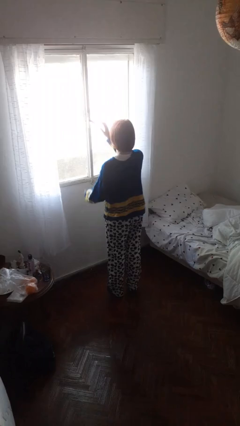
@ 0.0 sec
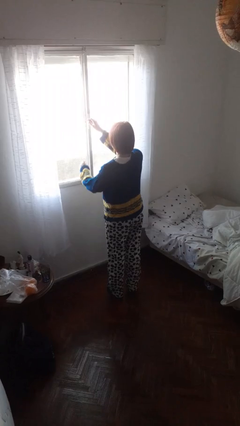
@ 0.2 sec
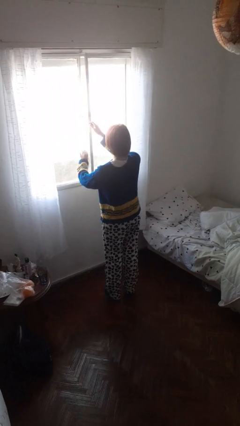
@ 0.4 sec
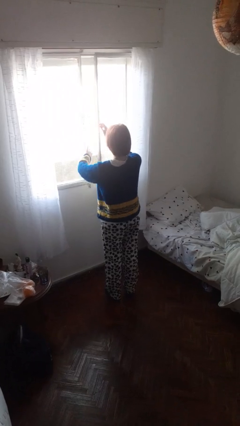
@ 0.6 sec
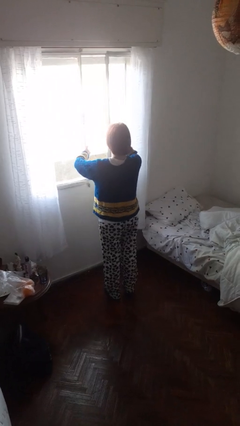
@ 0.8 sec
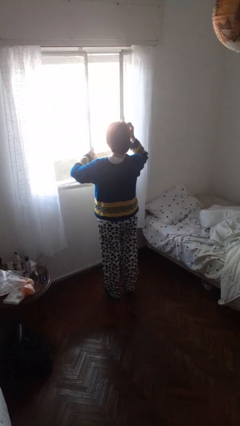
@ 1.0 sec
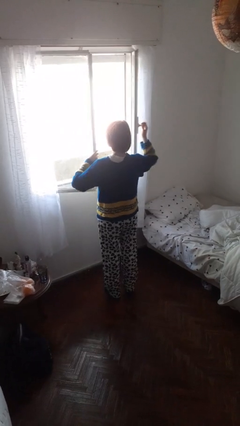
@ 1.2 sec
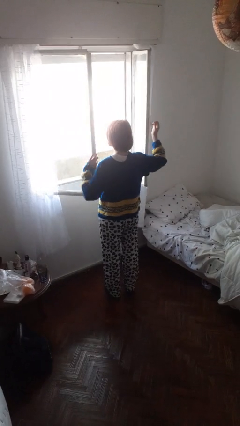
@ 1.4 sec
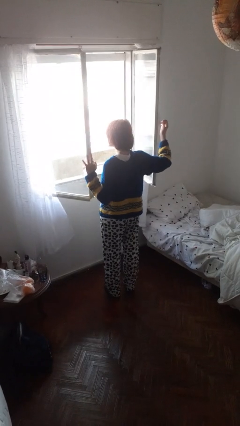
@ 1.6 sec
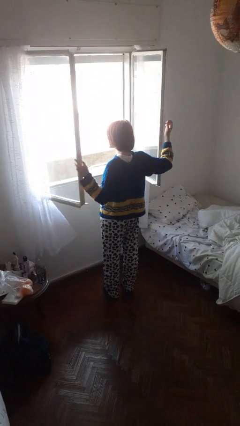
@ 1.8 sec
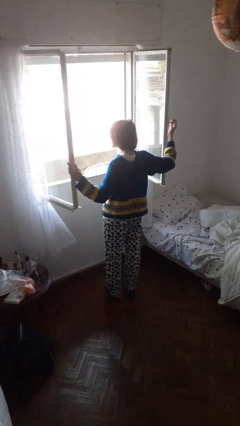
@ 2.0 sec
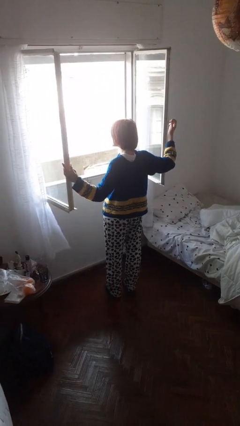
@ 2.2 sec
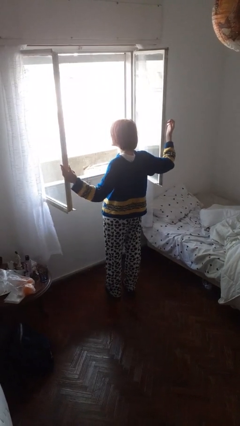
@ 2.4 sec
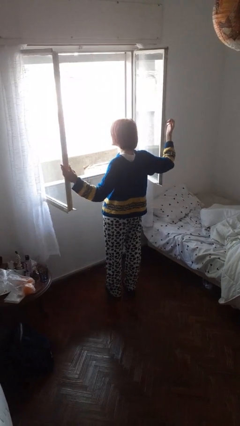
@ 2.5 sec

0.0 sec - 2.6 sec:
person opens home window

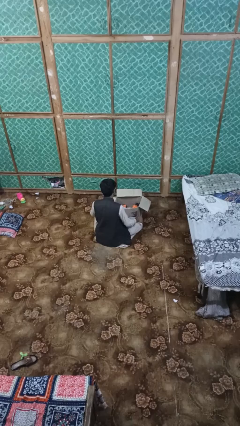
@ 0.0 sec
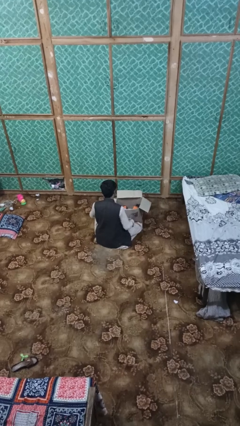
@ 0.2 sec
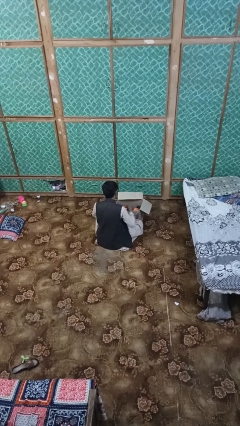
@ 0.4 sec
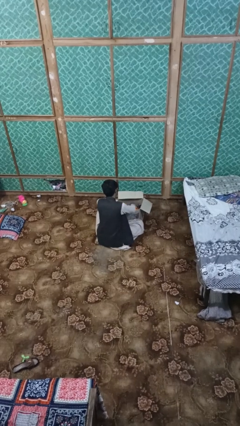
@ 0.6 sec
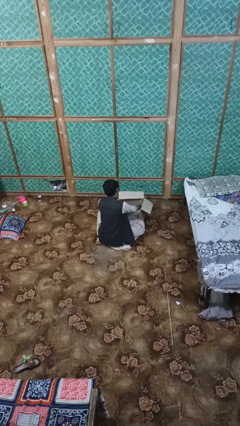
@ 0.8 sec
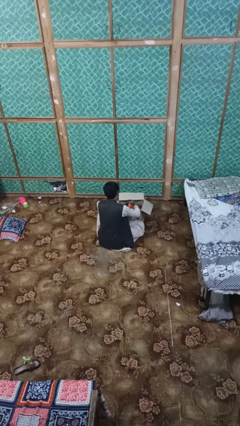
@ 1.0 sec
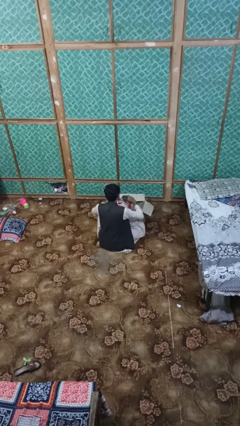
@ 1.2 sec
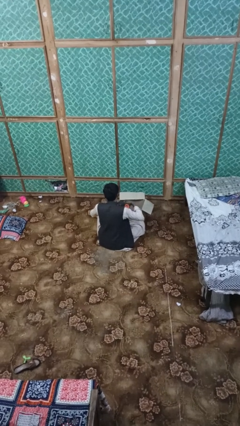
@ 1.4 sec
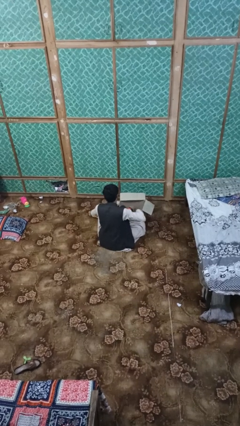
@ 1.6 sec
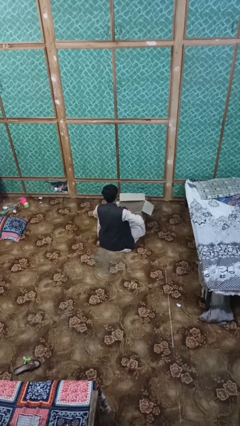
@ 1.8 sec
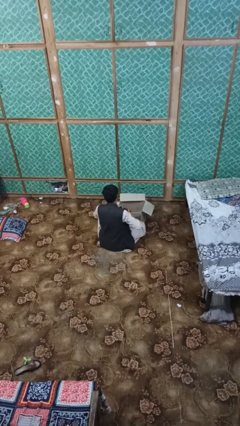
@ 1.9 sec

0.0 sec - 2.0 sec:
person takes object from box

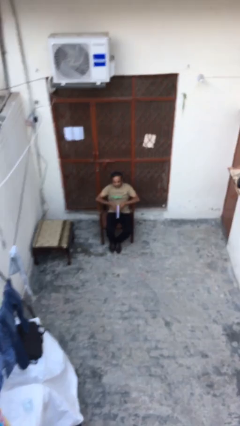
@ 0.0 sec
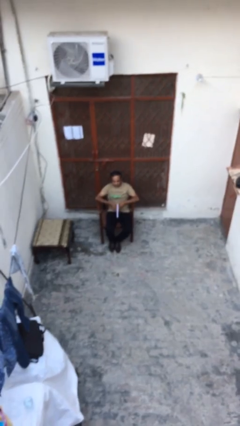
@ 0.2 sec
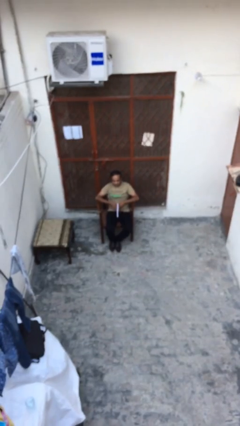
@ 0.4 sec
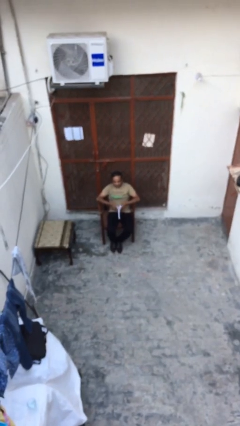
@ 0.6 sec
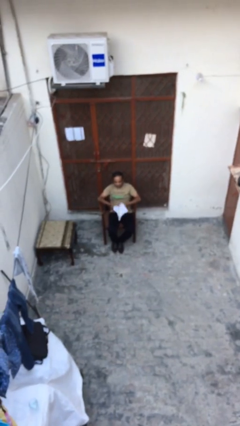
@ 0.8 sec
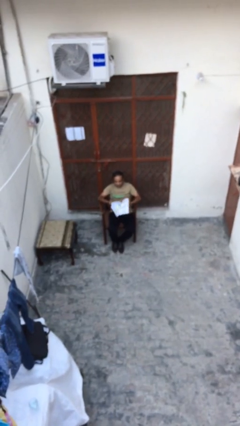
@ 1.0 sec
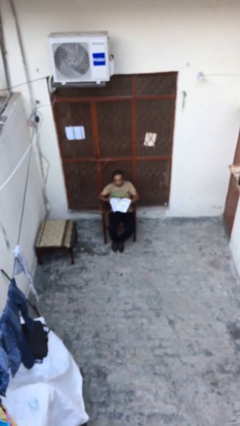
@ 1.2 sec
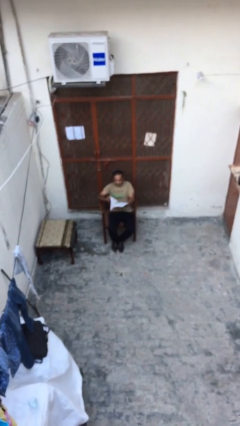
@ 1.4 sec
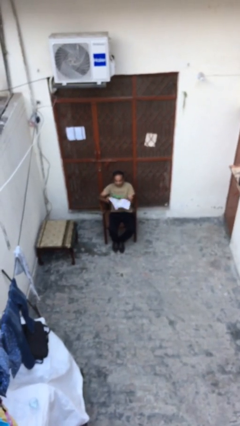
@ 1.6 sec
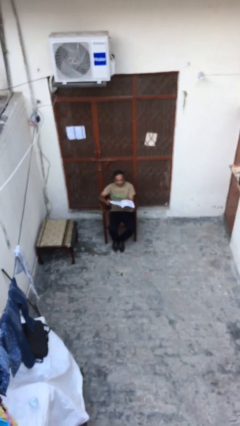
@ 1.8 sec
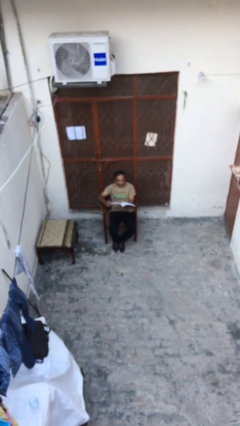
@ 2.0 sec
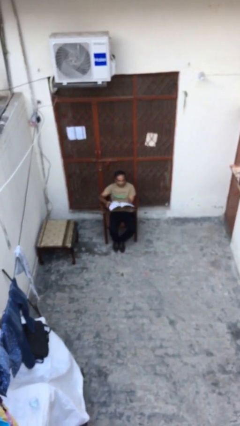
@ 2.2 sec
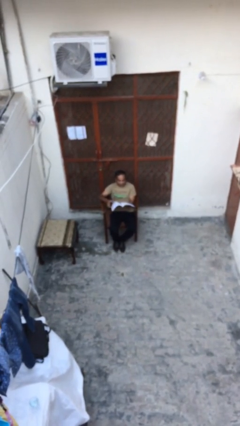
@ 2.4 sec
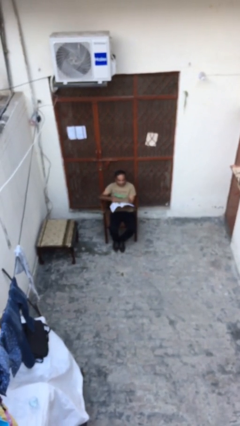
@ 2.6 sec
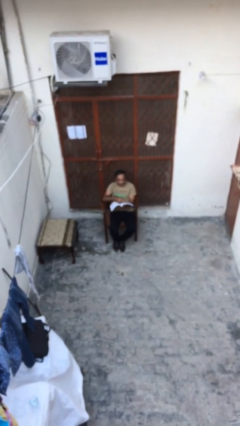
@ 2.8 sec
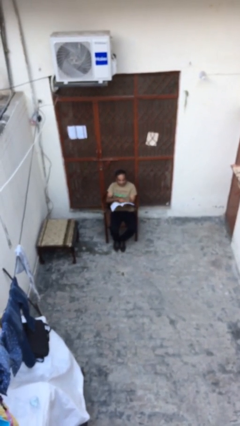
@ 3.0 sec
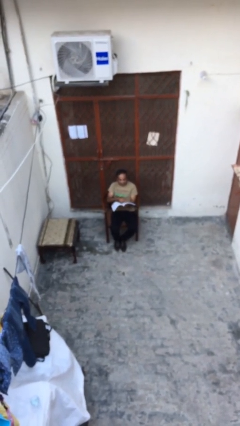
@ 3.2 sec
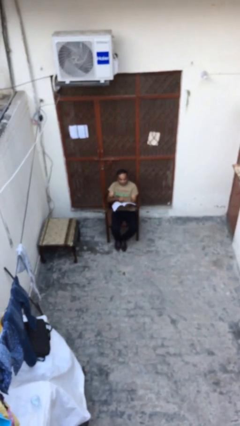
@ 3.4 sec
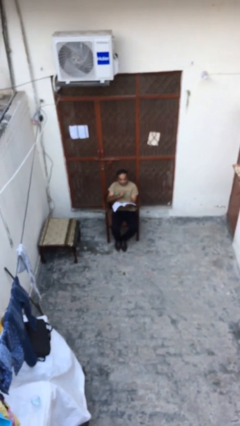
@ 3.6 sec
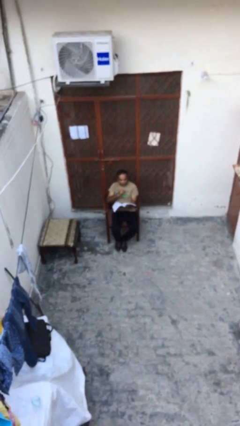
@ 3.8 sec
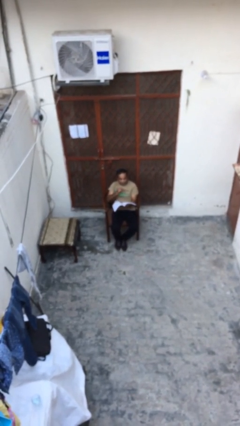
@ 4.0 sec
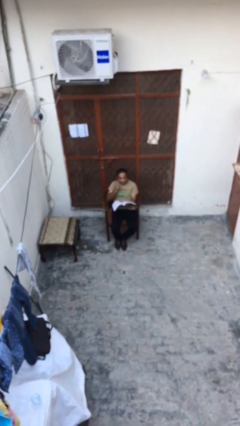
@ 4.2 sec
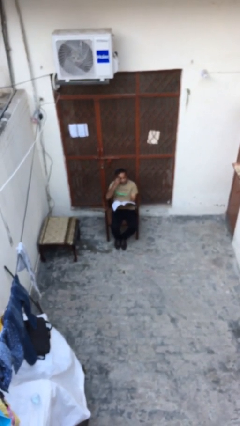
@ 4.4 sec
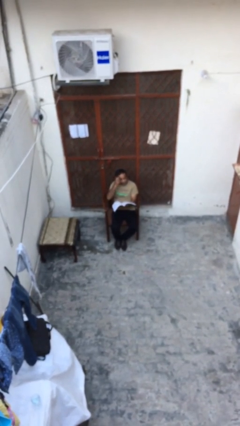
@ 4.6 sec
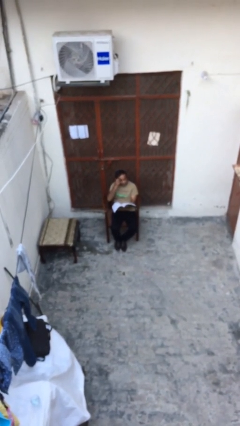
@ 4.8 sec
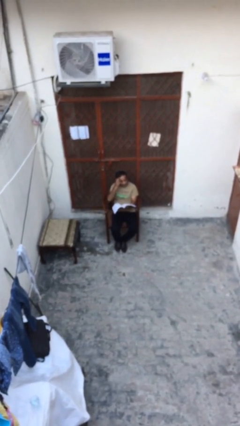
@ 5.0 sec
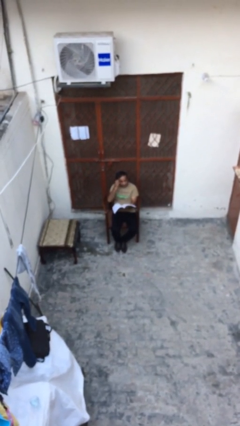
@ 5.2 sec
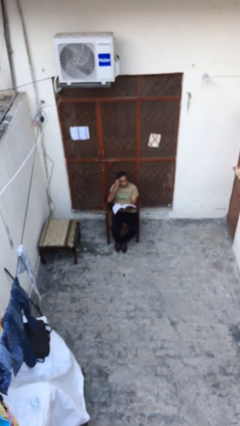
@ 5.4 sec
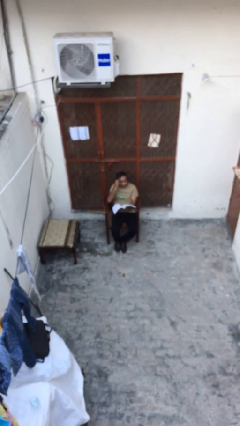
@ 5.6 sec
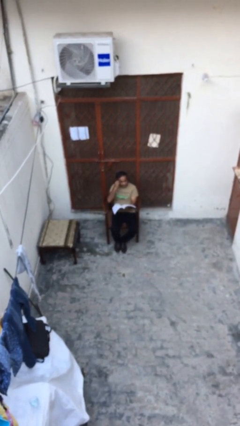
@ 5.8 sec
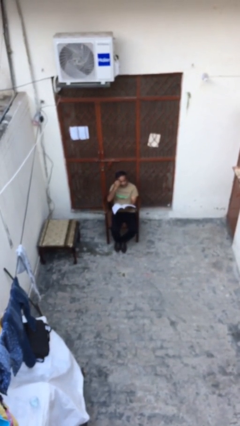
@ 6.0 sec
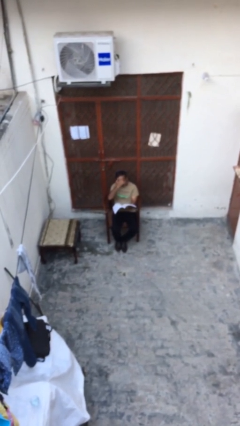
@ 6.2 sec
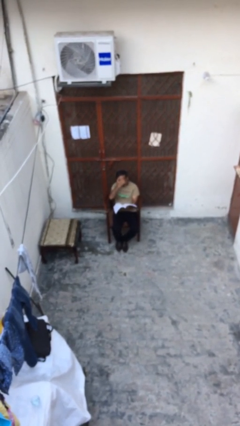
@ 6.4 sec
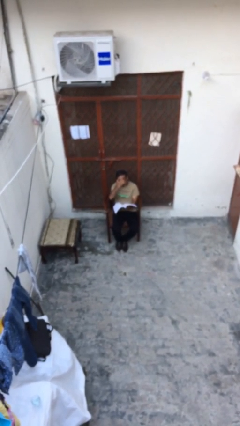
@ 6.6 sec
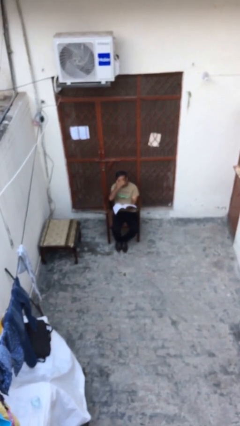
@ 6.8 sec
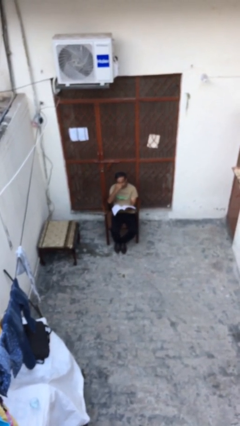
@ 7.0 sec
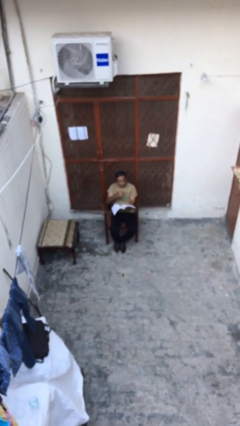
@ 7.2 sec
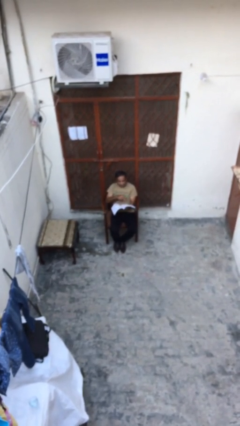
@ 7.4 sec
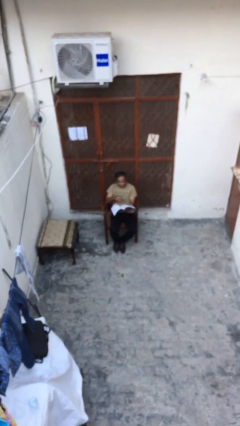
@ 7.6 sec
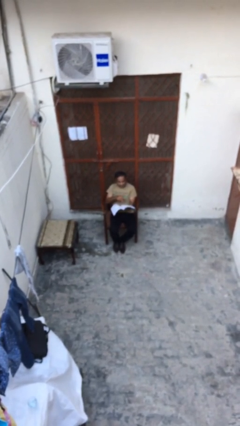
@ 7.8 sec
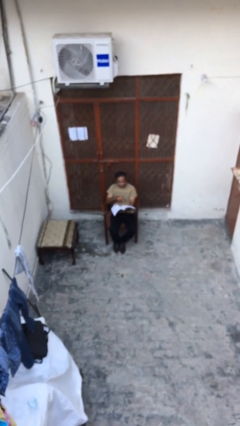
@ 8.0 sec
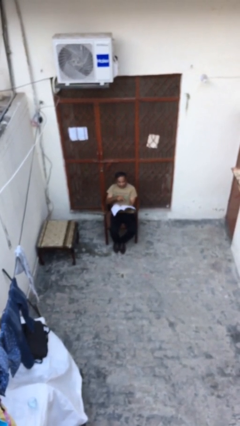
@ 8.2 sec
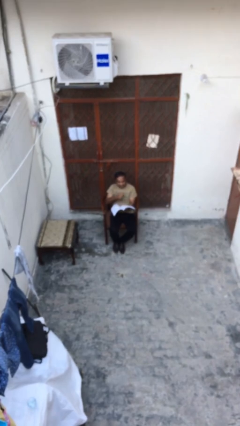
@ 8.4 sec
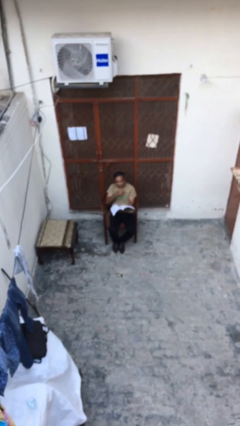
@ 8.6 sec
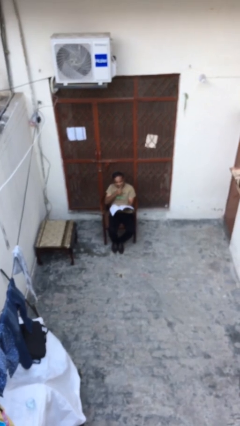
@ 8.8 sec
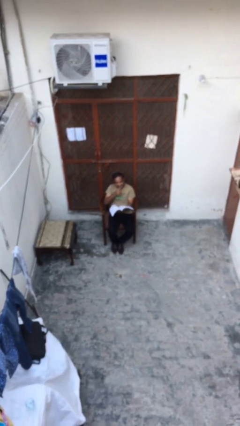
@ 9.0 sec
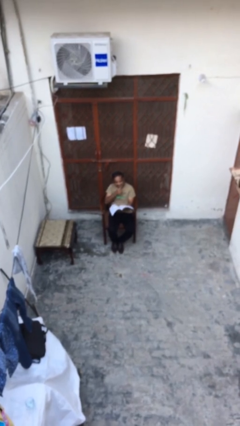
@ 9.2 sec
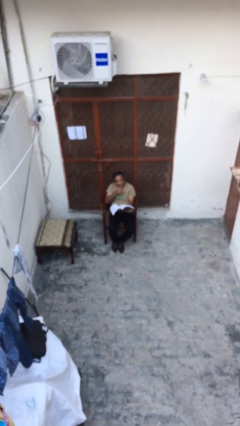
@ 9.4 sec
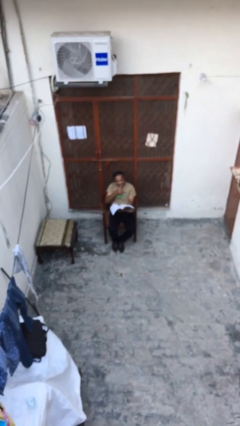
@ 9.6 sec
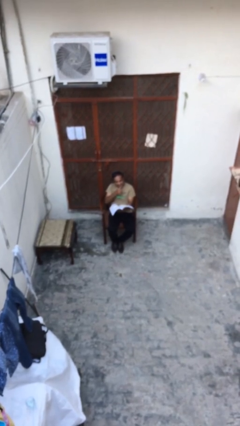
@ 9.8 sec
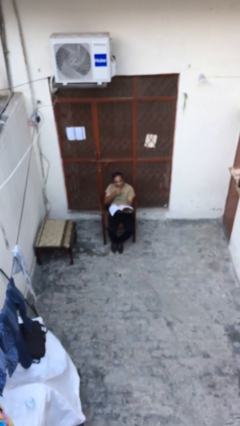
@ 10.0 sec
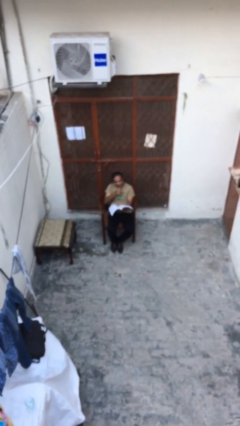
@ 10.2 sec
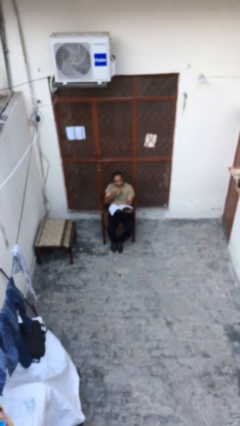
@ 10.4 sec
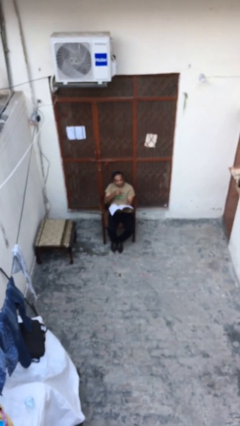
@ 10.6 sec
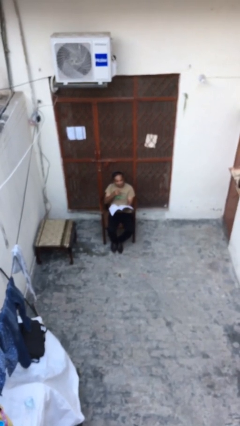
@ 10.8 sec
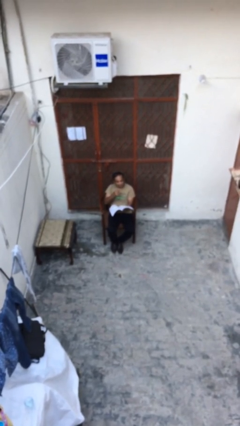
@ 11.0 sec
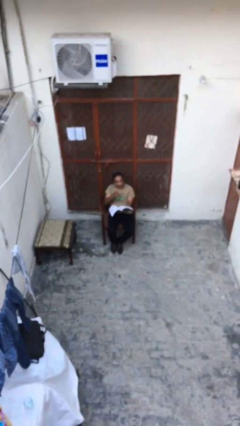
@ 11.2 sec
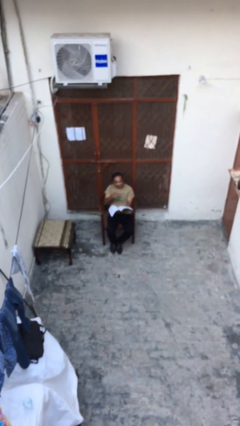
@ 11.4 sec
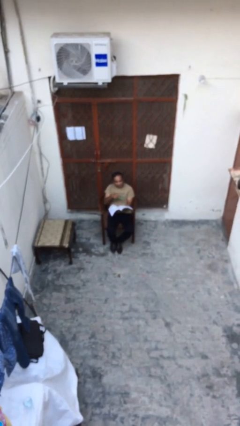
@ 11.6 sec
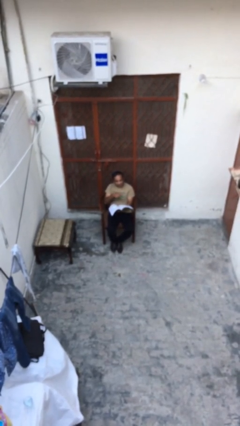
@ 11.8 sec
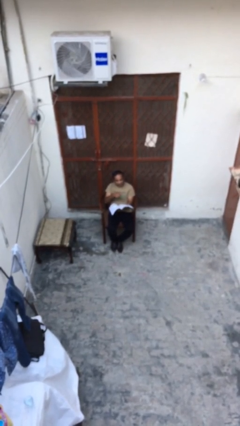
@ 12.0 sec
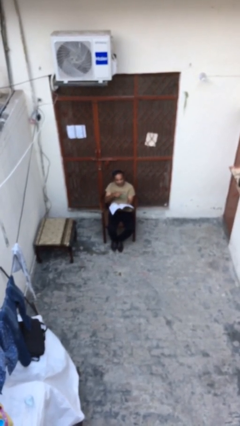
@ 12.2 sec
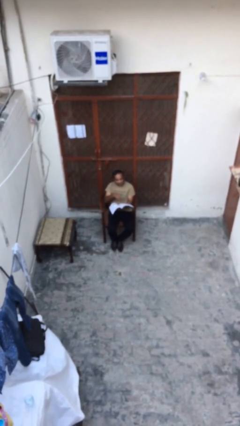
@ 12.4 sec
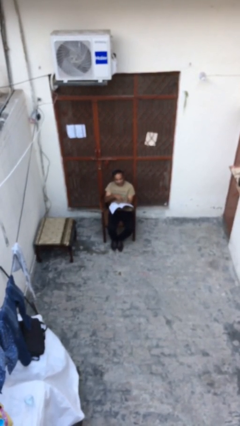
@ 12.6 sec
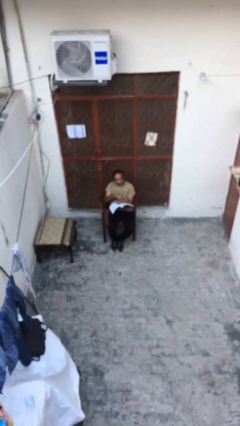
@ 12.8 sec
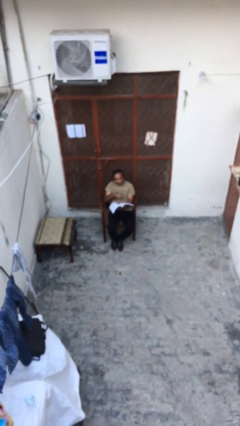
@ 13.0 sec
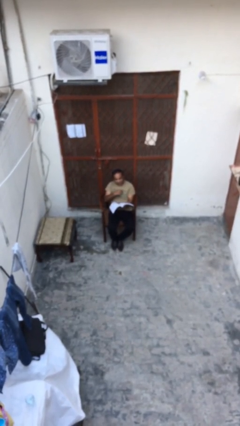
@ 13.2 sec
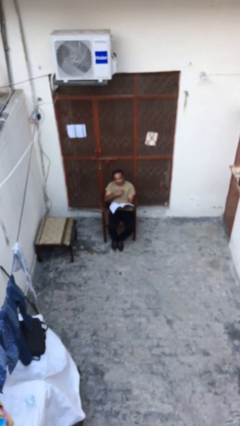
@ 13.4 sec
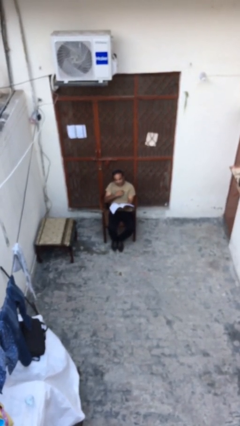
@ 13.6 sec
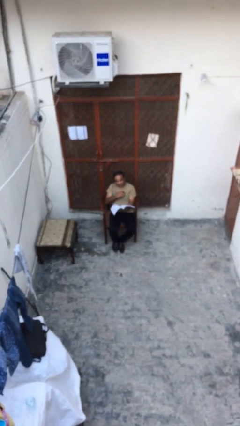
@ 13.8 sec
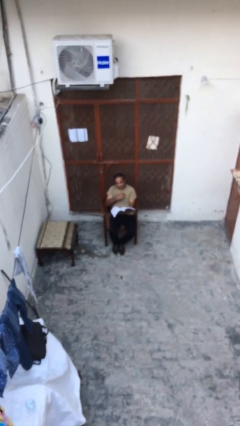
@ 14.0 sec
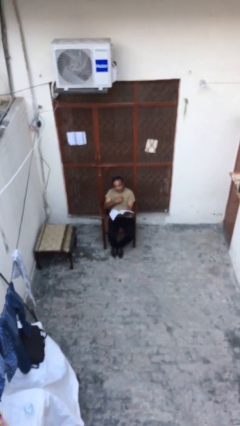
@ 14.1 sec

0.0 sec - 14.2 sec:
person reads document
